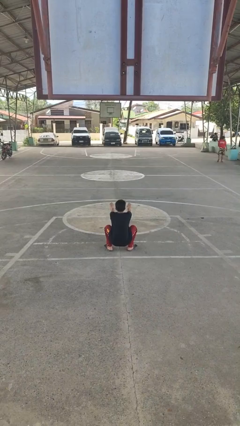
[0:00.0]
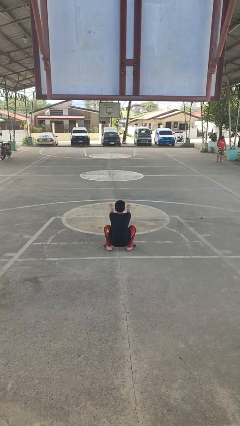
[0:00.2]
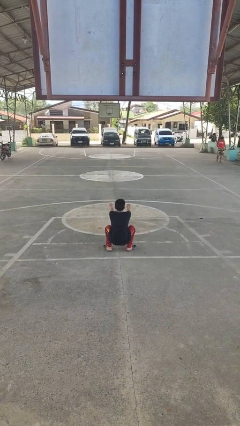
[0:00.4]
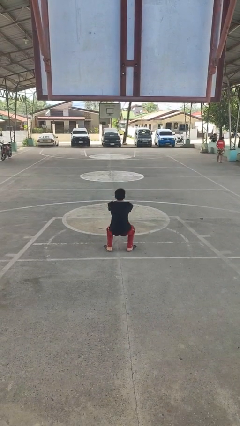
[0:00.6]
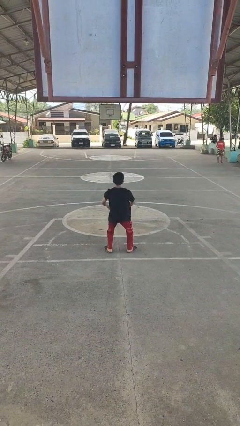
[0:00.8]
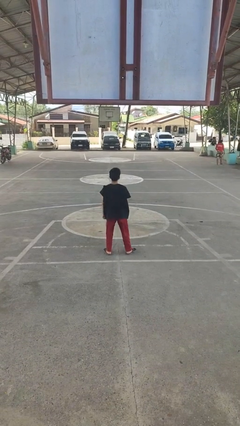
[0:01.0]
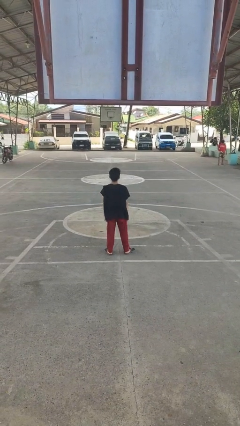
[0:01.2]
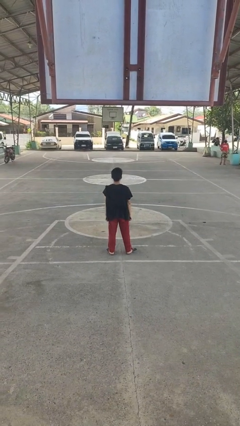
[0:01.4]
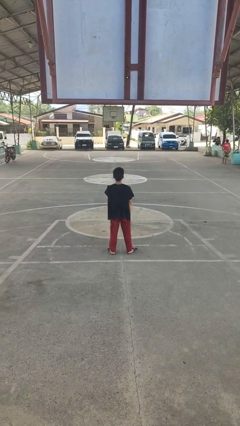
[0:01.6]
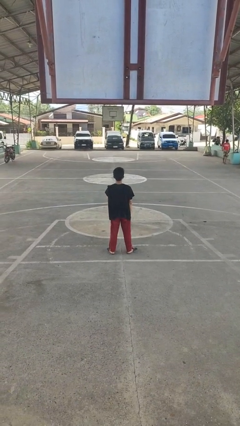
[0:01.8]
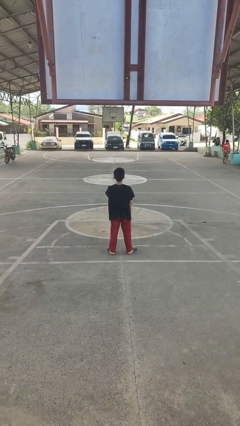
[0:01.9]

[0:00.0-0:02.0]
person stands up

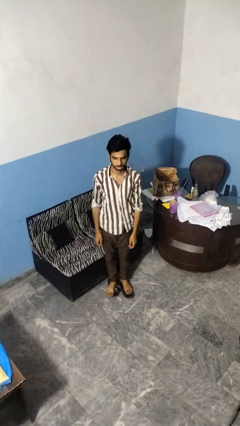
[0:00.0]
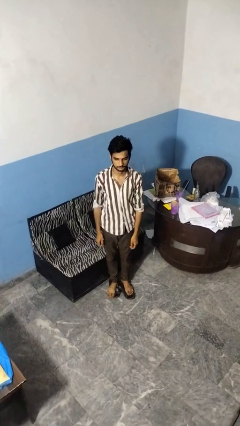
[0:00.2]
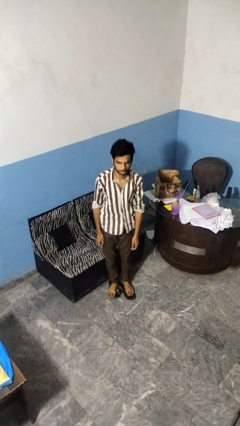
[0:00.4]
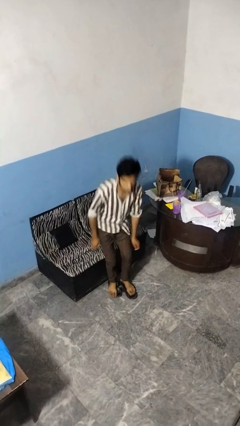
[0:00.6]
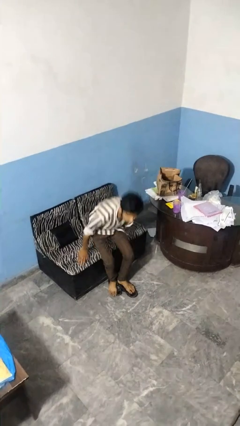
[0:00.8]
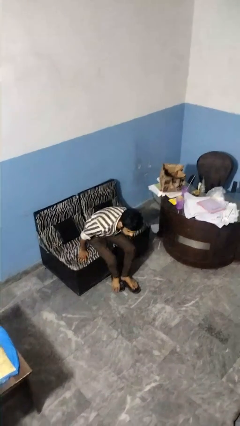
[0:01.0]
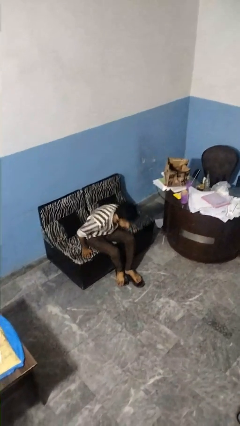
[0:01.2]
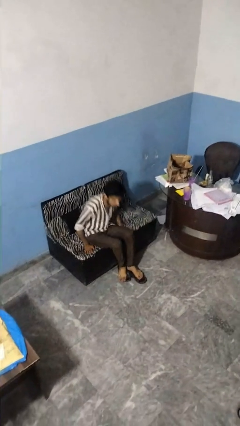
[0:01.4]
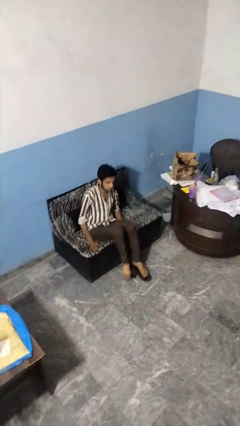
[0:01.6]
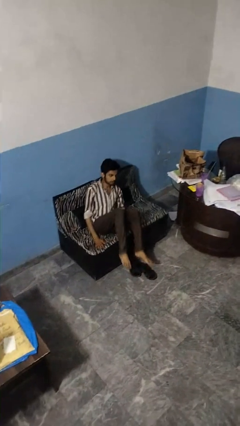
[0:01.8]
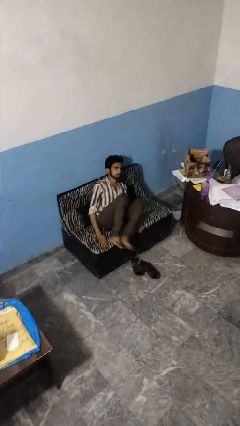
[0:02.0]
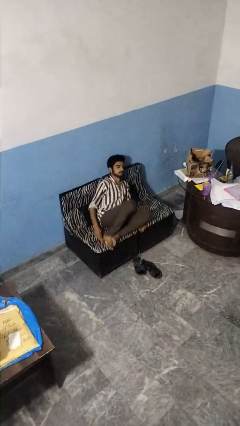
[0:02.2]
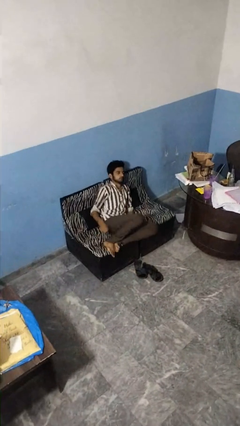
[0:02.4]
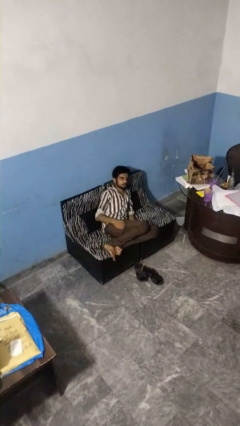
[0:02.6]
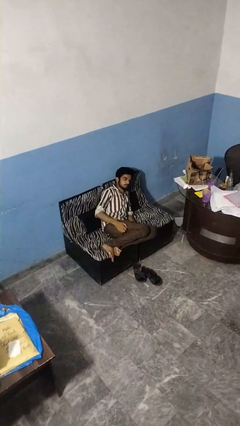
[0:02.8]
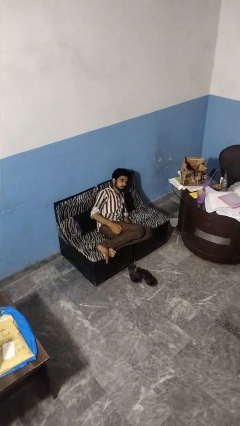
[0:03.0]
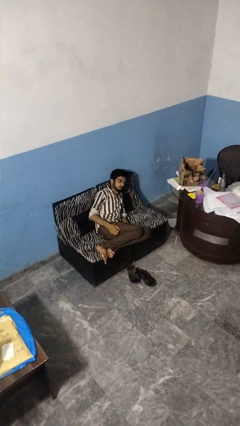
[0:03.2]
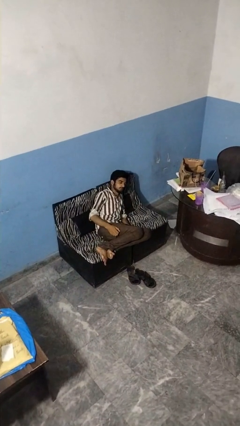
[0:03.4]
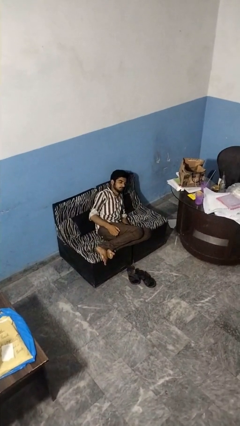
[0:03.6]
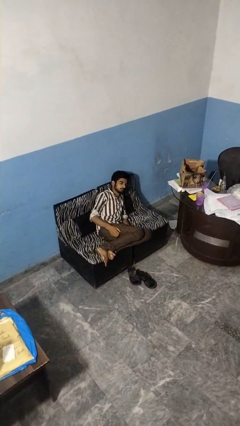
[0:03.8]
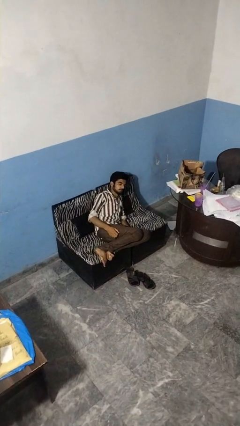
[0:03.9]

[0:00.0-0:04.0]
person lies down on couch

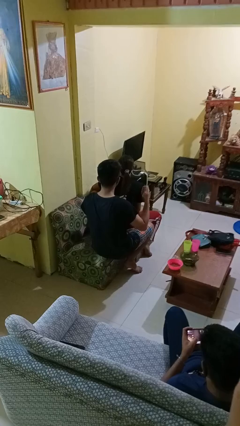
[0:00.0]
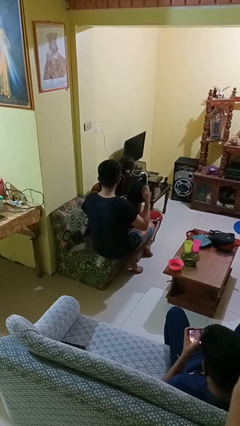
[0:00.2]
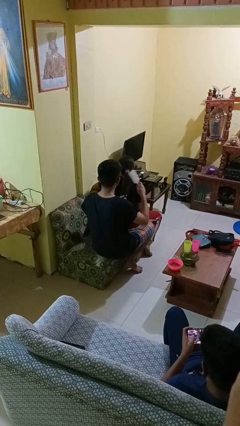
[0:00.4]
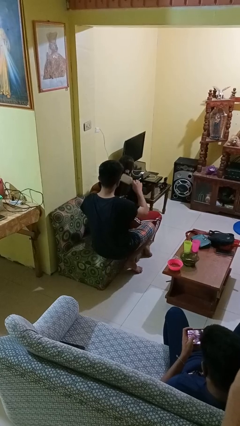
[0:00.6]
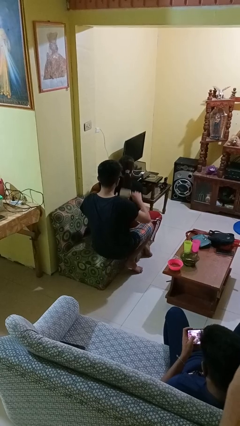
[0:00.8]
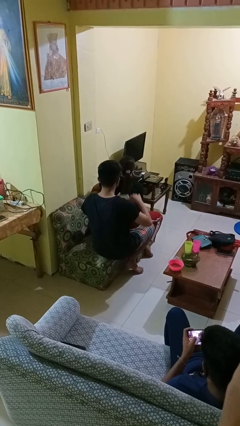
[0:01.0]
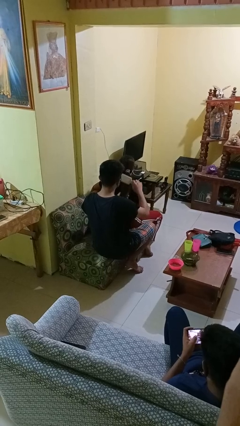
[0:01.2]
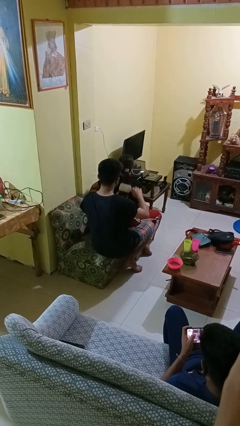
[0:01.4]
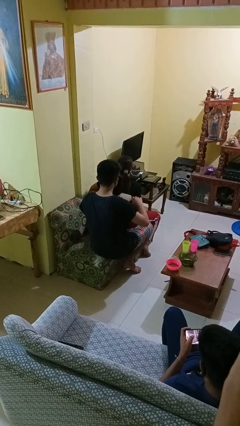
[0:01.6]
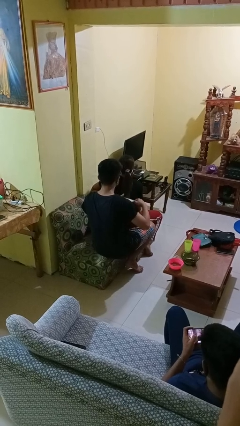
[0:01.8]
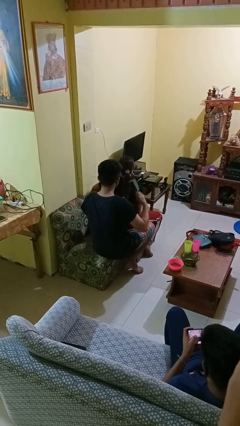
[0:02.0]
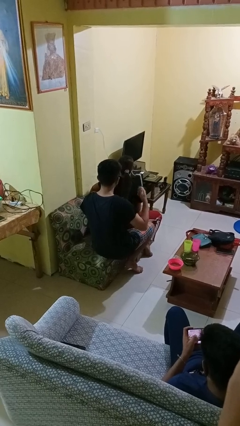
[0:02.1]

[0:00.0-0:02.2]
person brushes hair of person

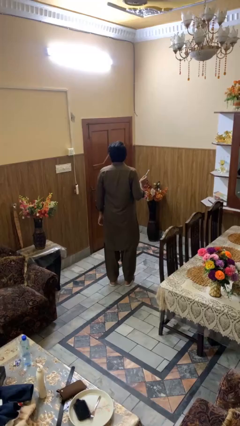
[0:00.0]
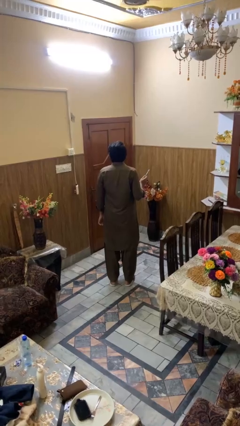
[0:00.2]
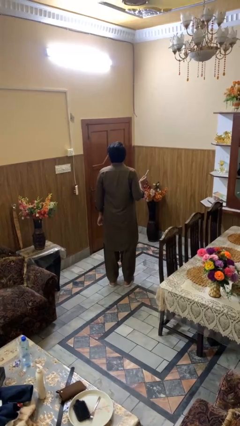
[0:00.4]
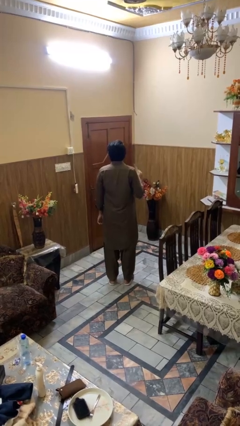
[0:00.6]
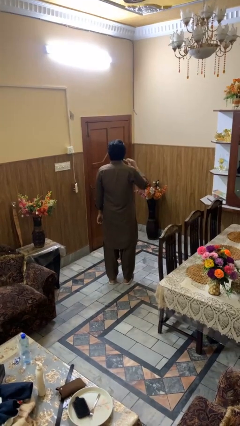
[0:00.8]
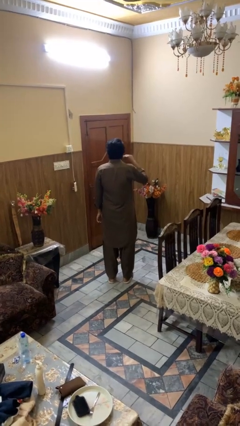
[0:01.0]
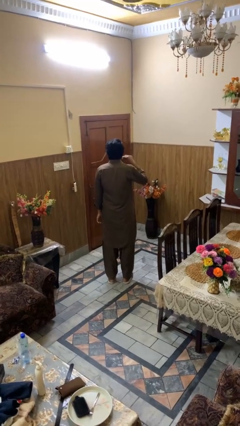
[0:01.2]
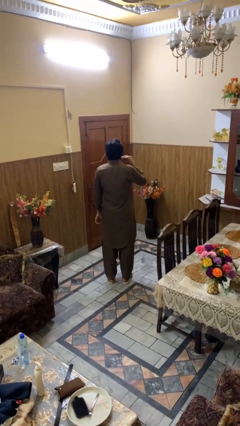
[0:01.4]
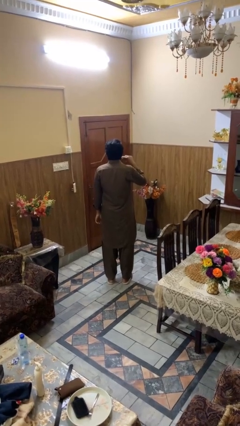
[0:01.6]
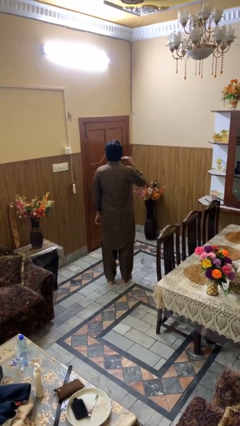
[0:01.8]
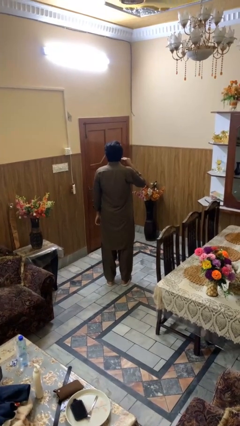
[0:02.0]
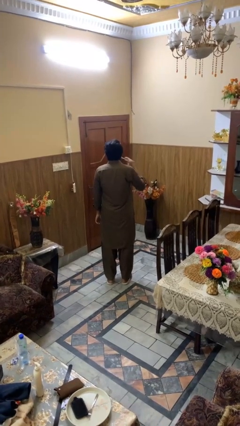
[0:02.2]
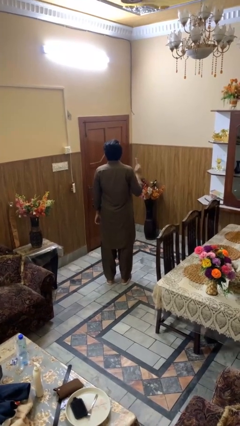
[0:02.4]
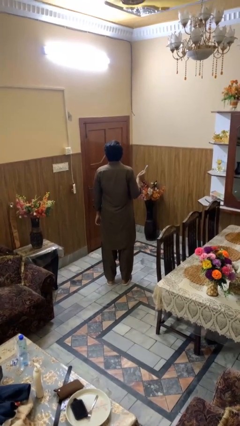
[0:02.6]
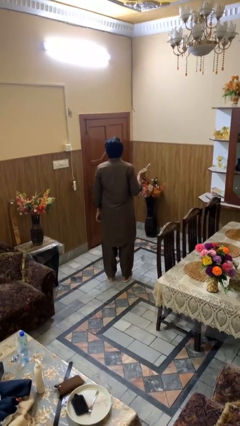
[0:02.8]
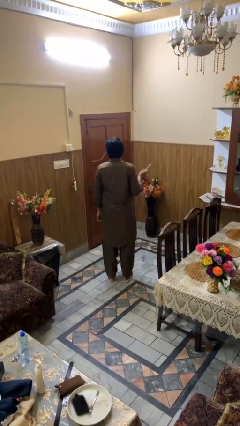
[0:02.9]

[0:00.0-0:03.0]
person brushes teeth

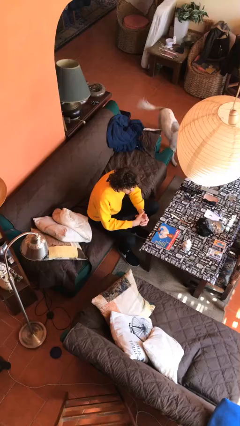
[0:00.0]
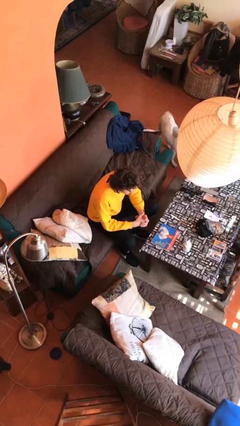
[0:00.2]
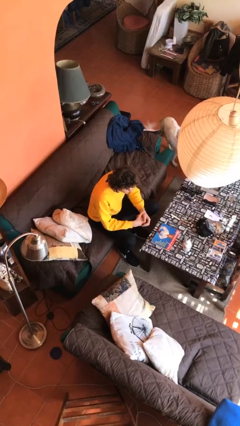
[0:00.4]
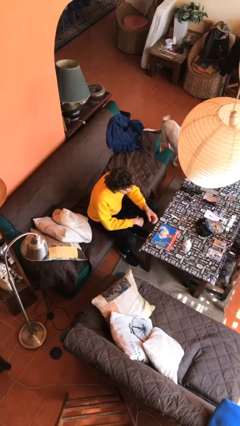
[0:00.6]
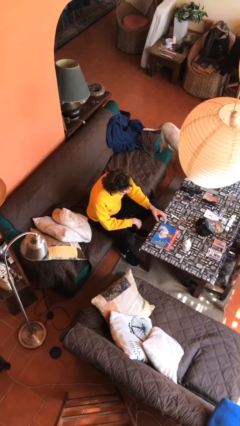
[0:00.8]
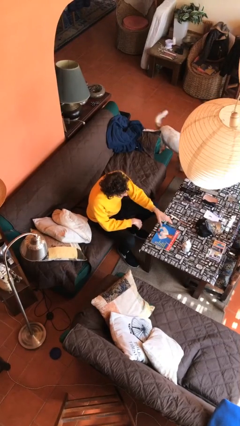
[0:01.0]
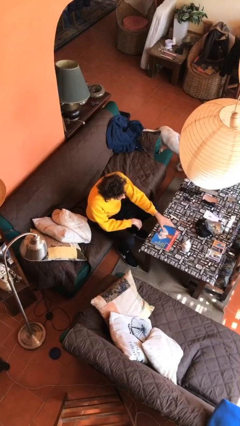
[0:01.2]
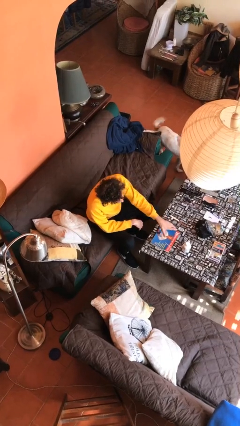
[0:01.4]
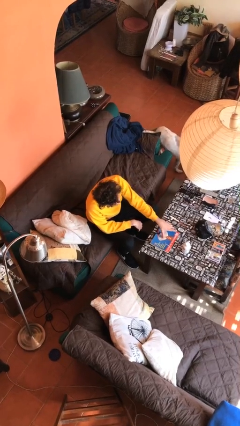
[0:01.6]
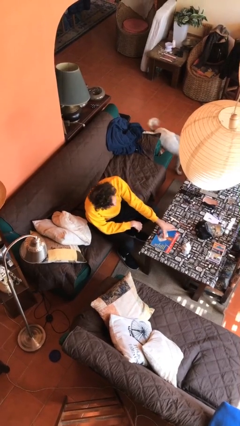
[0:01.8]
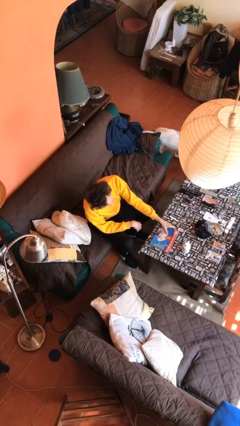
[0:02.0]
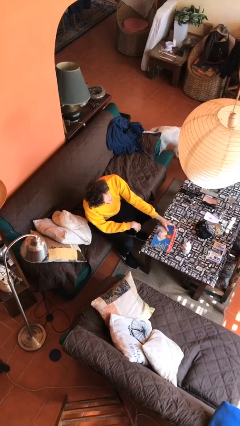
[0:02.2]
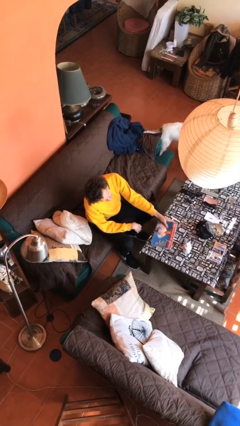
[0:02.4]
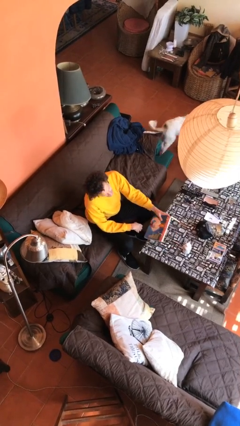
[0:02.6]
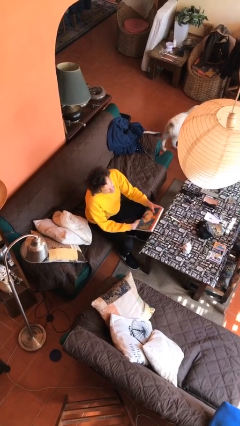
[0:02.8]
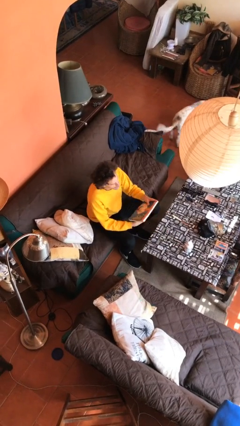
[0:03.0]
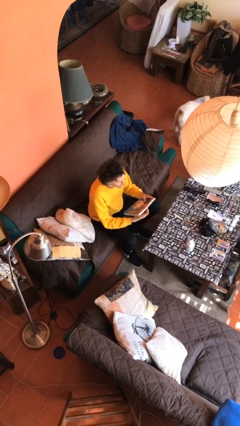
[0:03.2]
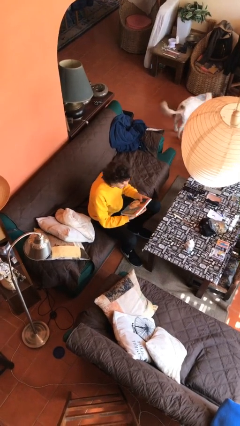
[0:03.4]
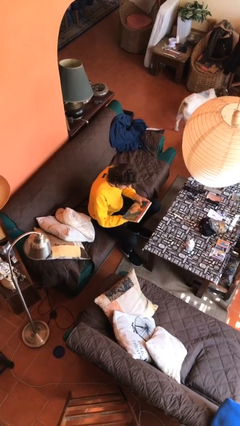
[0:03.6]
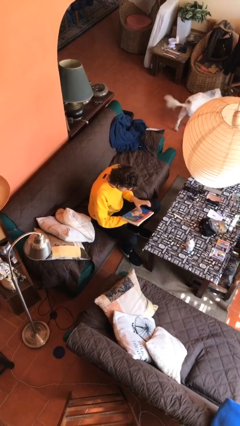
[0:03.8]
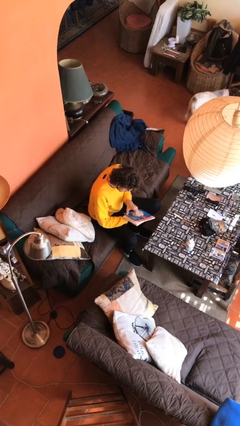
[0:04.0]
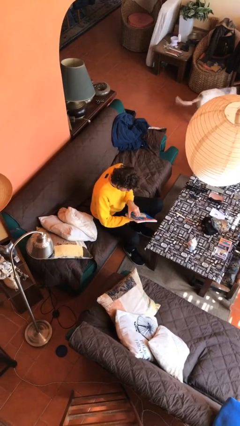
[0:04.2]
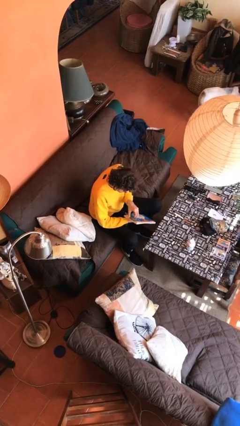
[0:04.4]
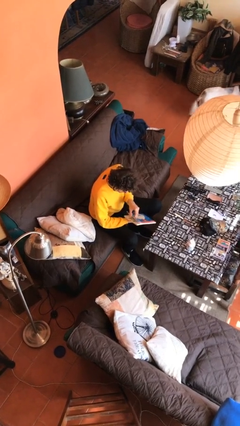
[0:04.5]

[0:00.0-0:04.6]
person picks up object from table

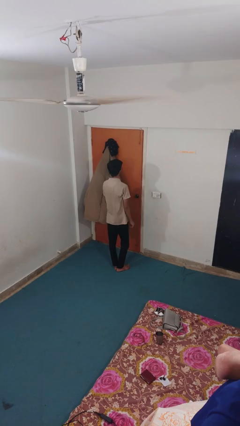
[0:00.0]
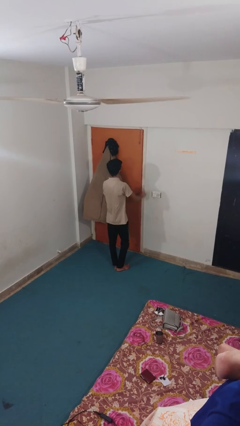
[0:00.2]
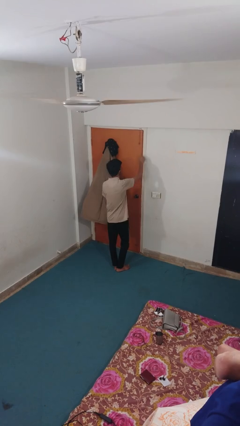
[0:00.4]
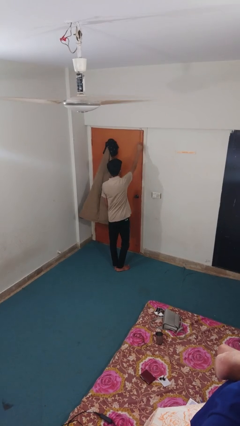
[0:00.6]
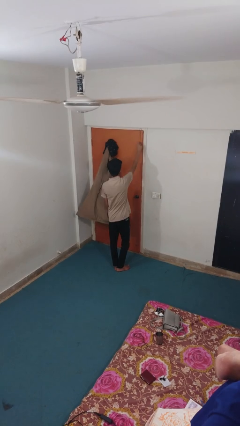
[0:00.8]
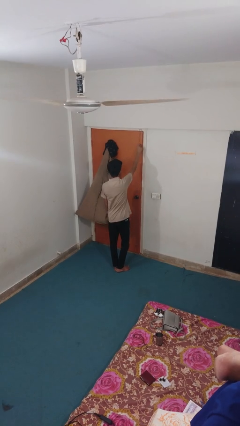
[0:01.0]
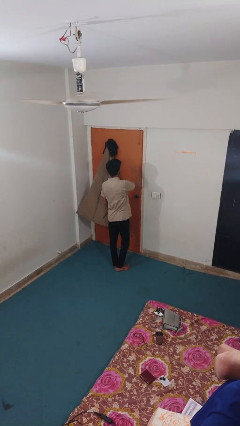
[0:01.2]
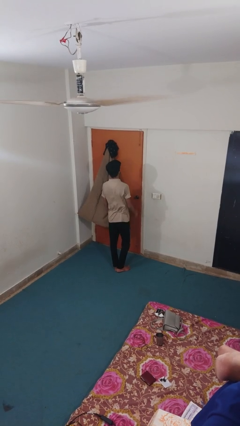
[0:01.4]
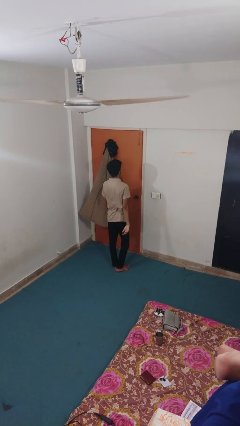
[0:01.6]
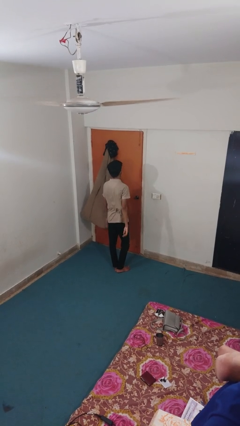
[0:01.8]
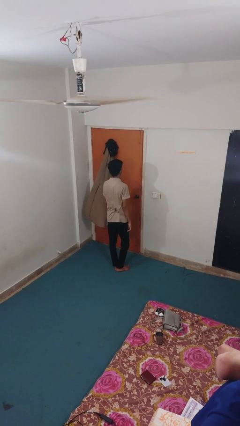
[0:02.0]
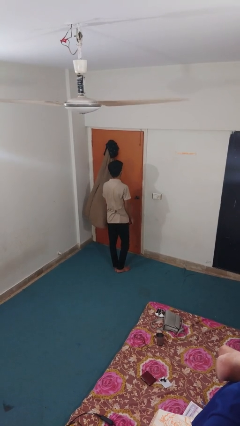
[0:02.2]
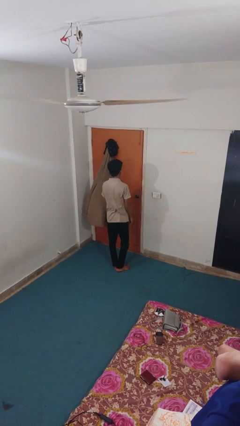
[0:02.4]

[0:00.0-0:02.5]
person unlocks door with keys
